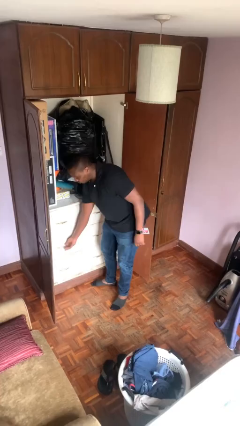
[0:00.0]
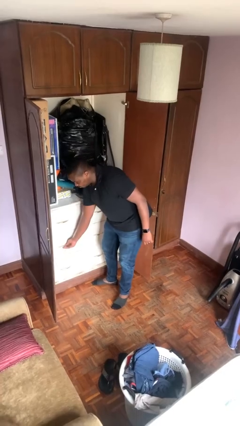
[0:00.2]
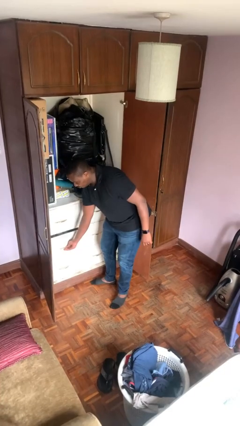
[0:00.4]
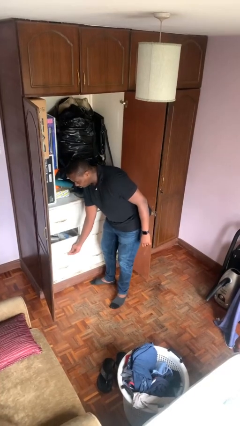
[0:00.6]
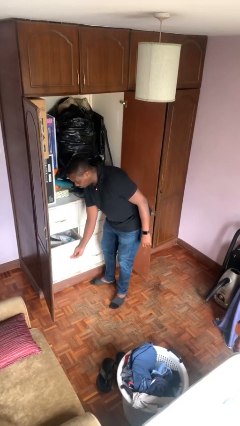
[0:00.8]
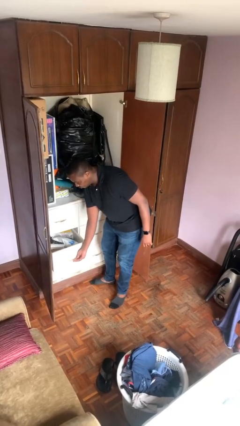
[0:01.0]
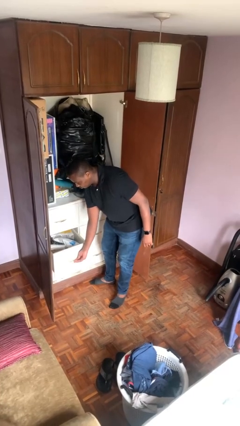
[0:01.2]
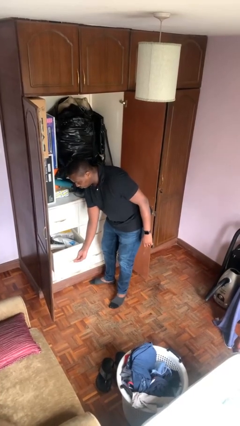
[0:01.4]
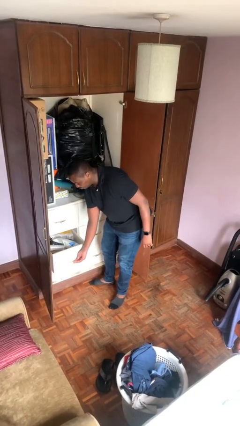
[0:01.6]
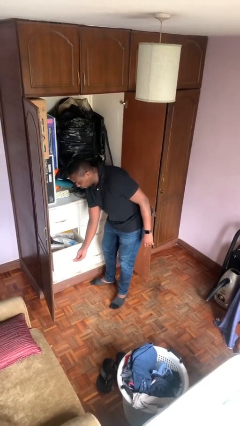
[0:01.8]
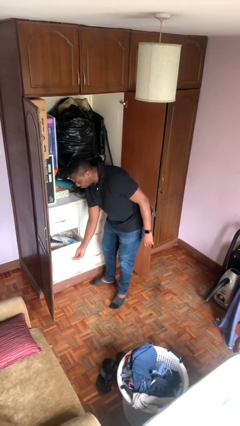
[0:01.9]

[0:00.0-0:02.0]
person opens dresser drawer

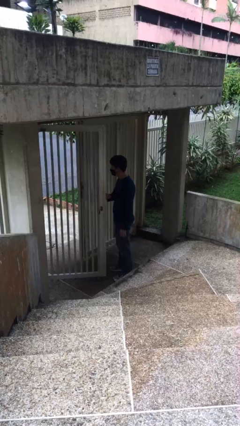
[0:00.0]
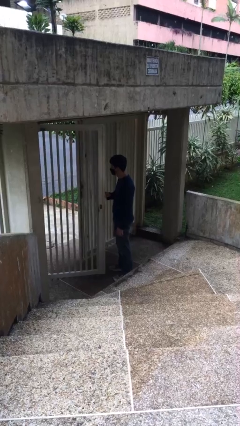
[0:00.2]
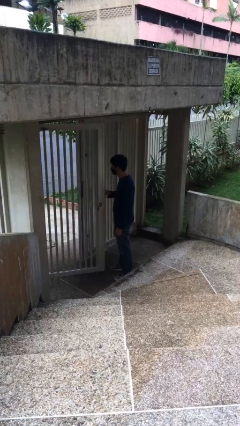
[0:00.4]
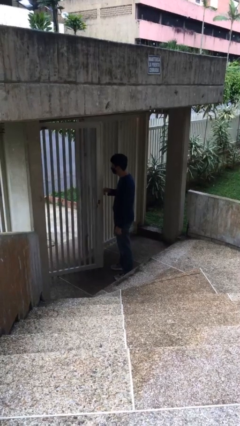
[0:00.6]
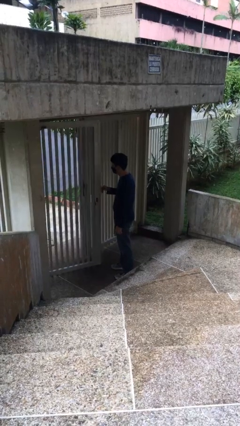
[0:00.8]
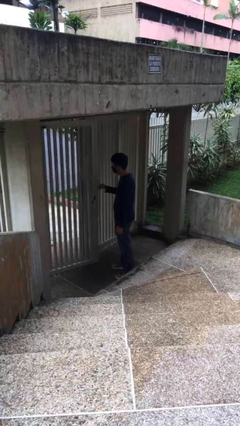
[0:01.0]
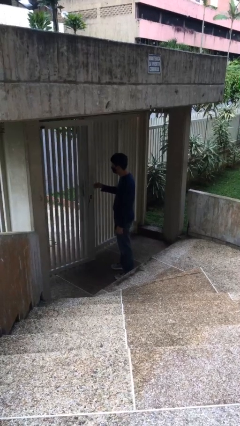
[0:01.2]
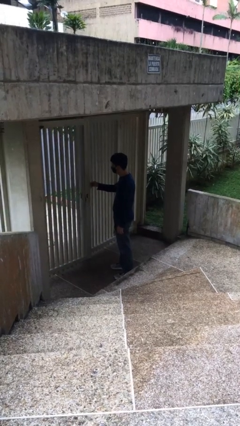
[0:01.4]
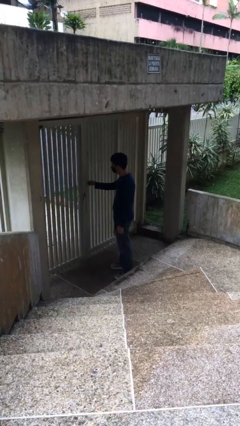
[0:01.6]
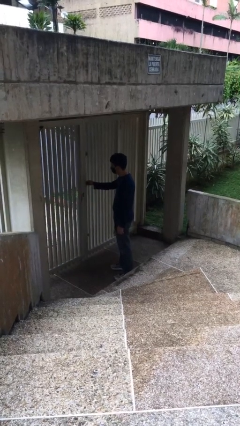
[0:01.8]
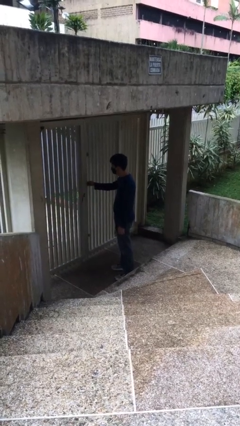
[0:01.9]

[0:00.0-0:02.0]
person closes facility door

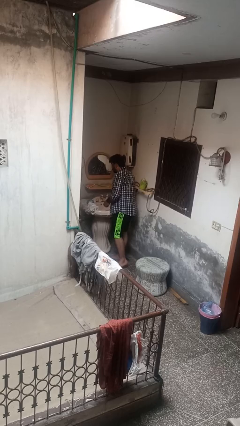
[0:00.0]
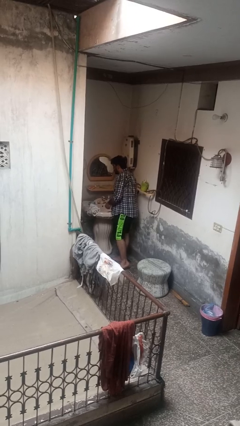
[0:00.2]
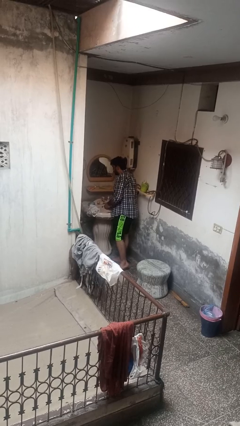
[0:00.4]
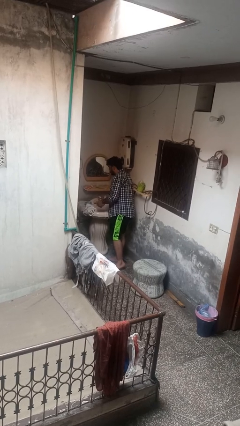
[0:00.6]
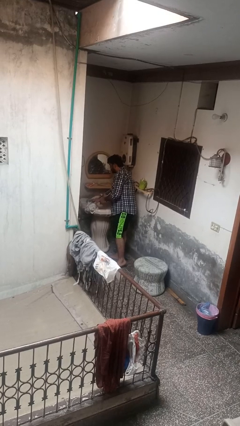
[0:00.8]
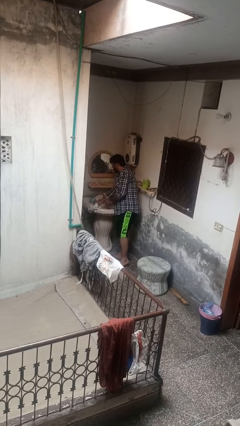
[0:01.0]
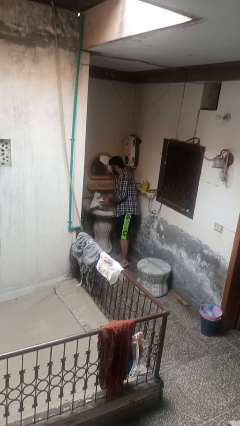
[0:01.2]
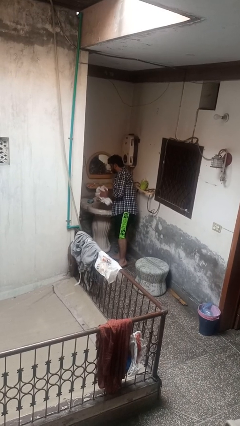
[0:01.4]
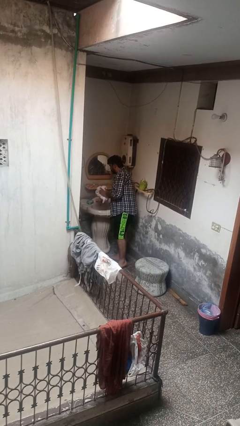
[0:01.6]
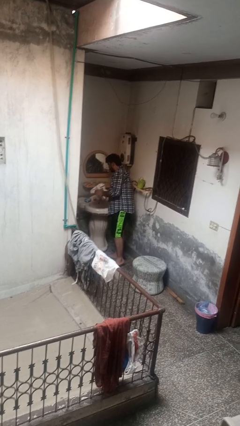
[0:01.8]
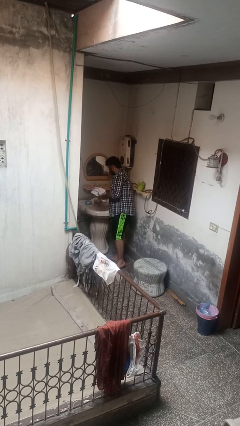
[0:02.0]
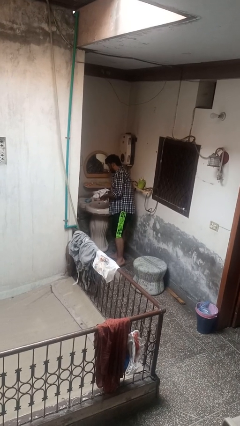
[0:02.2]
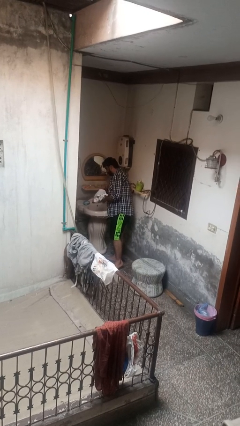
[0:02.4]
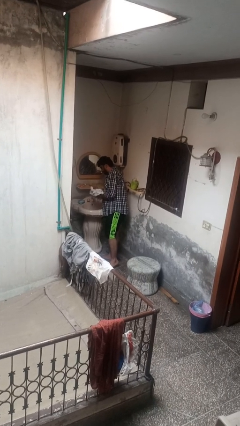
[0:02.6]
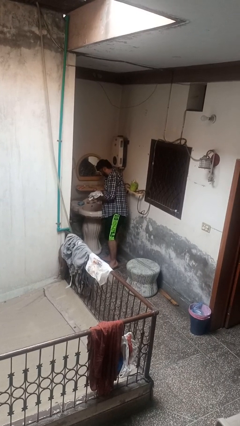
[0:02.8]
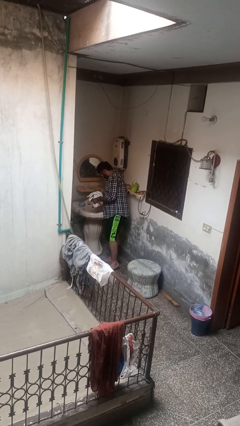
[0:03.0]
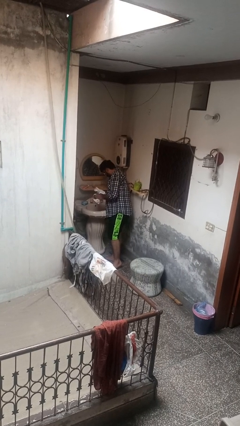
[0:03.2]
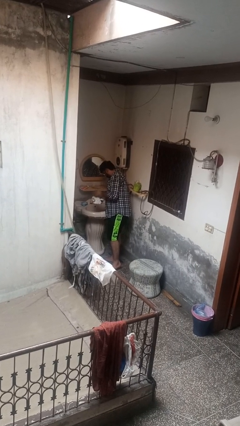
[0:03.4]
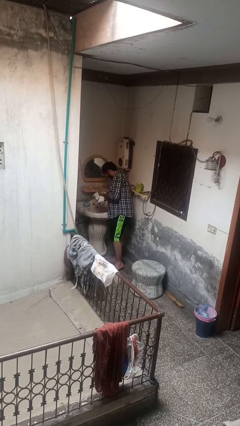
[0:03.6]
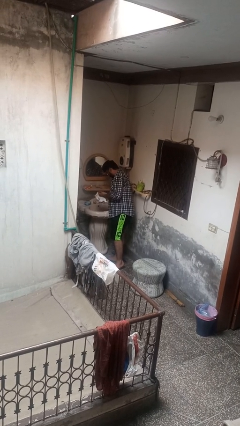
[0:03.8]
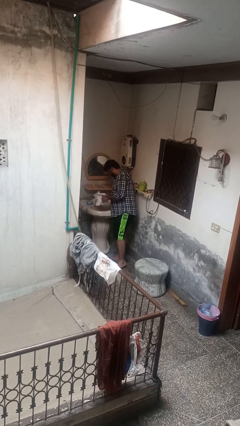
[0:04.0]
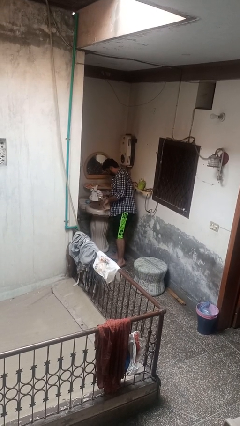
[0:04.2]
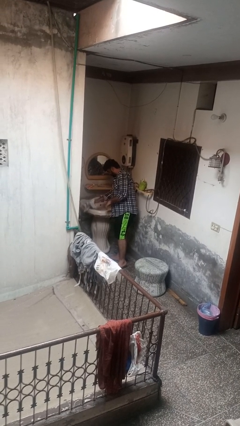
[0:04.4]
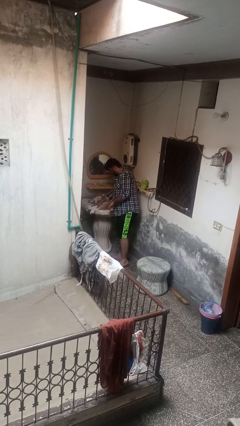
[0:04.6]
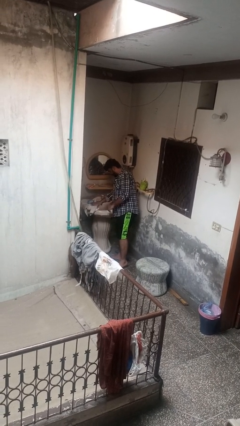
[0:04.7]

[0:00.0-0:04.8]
person dries hands with towel

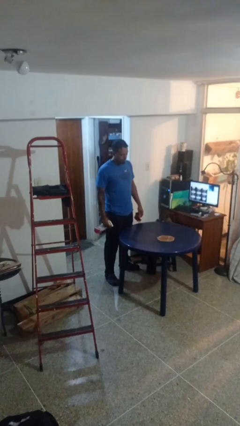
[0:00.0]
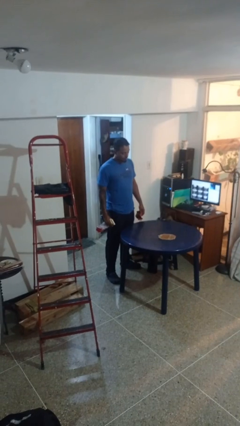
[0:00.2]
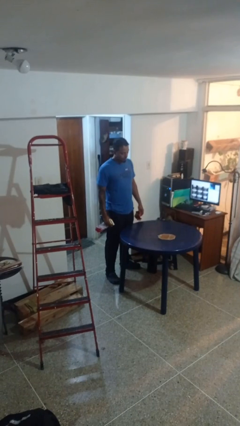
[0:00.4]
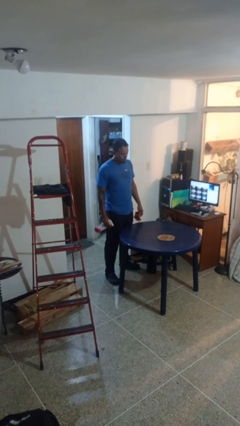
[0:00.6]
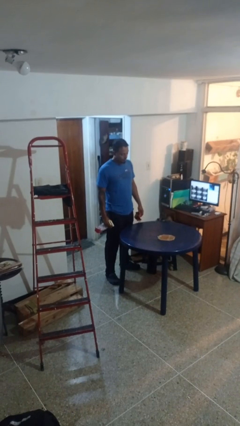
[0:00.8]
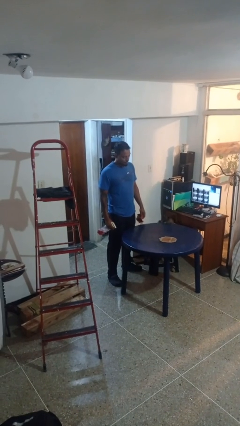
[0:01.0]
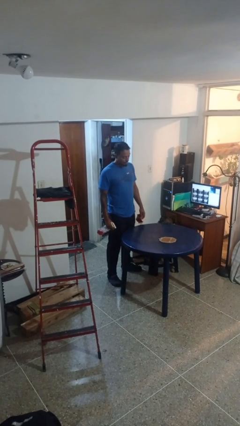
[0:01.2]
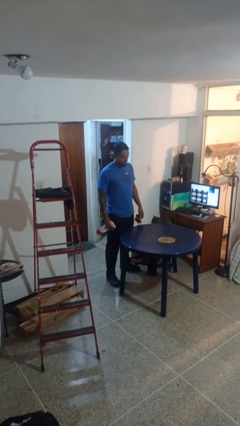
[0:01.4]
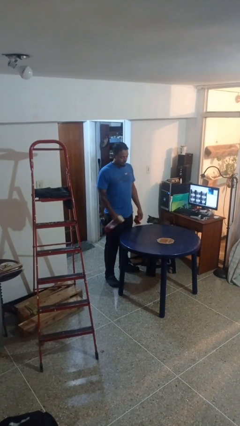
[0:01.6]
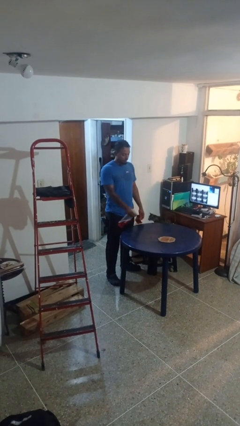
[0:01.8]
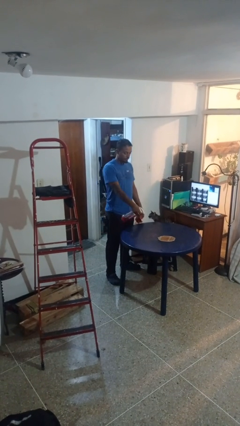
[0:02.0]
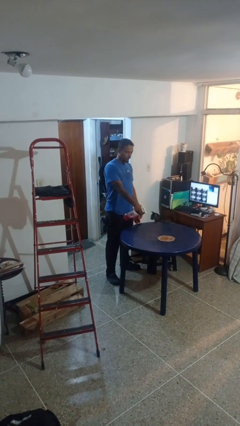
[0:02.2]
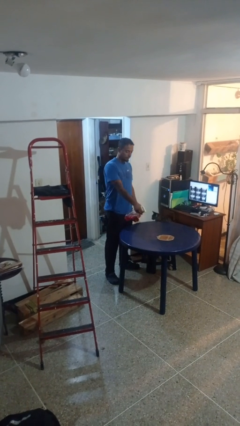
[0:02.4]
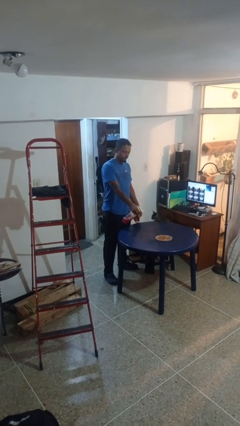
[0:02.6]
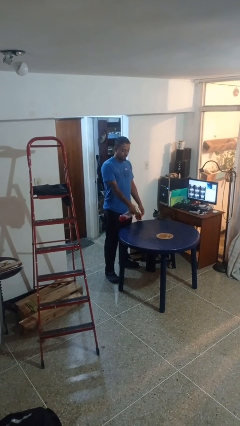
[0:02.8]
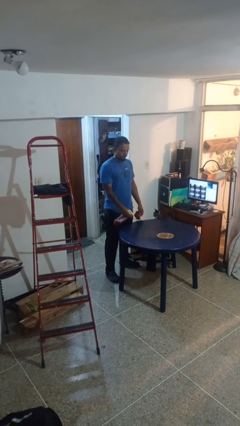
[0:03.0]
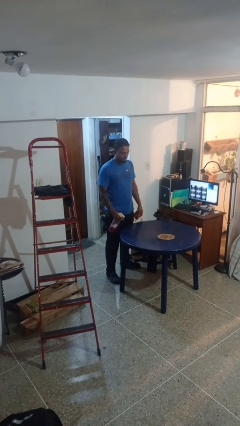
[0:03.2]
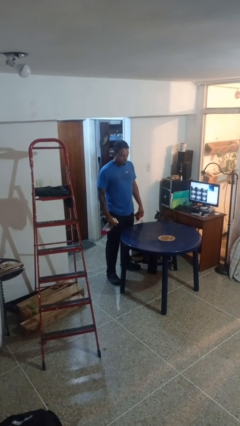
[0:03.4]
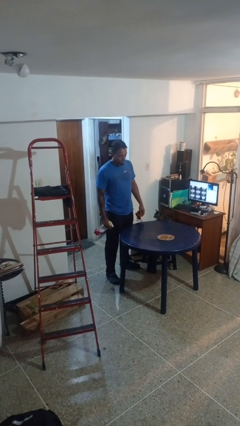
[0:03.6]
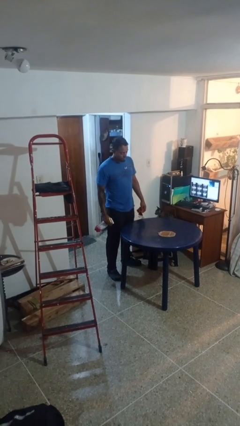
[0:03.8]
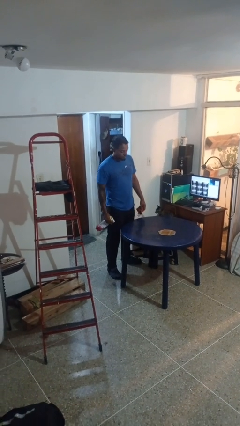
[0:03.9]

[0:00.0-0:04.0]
person sprays from bottle

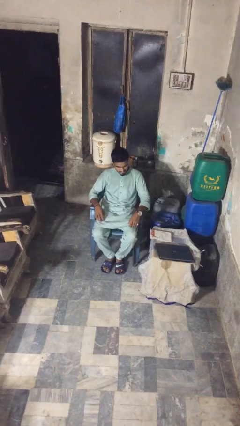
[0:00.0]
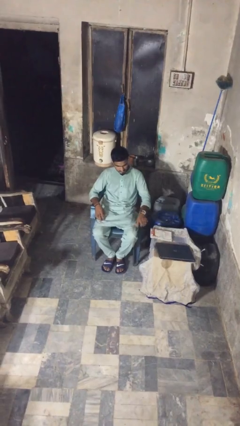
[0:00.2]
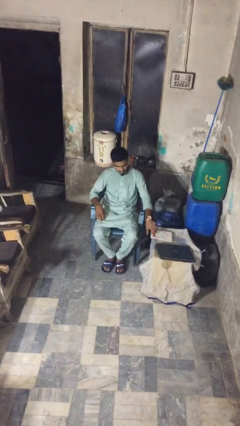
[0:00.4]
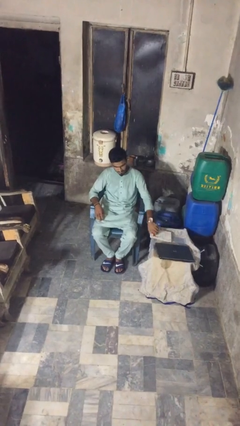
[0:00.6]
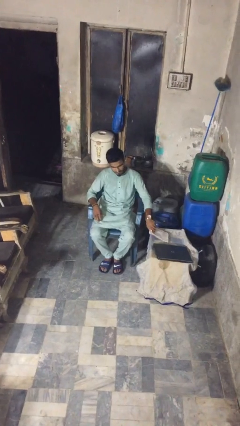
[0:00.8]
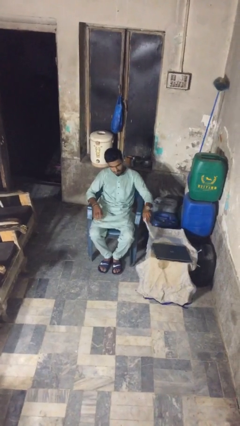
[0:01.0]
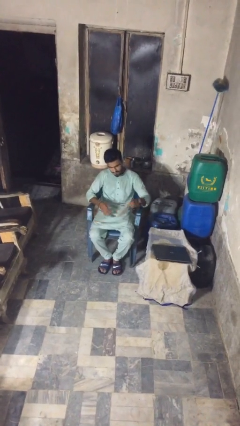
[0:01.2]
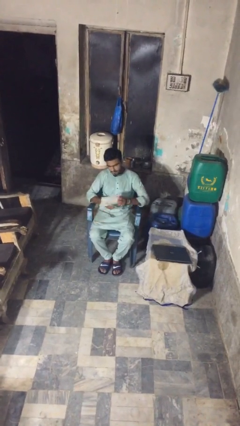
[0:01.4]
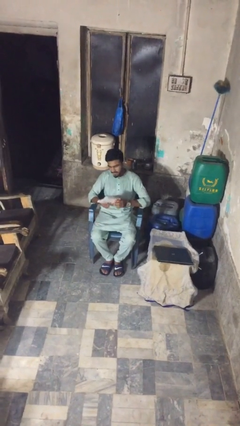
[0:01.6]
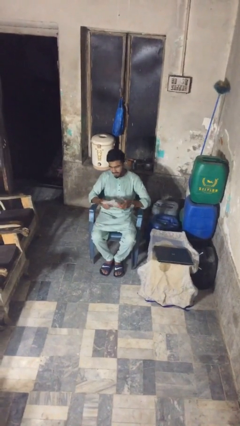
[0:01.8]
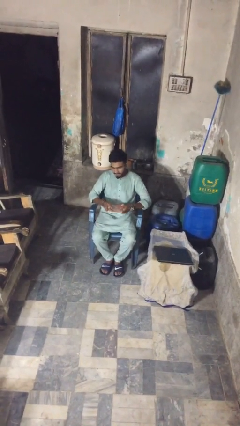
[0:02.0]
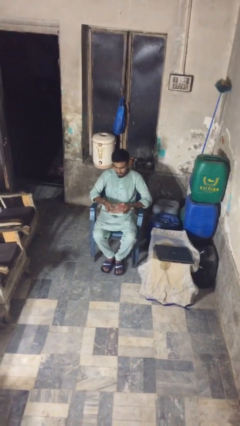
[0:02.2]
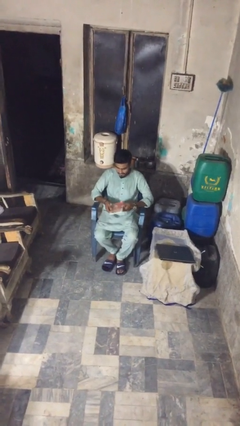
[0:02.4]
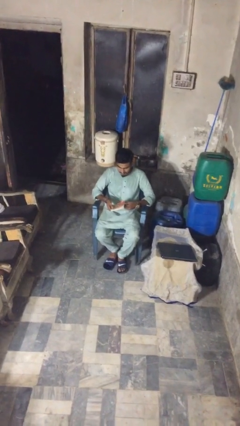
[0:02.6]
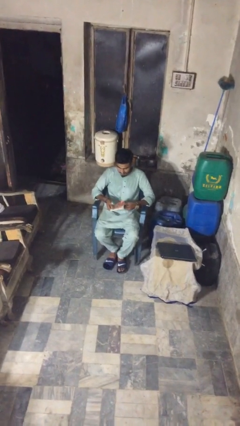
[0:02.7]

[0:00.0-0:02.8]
person picks up object from table

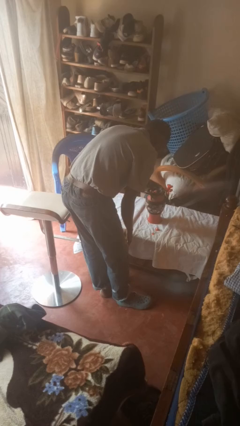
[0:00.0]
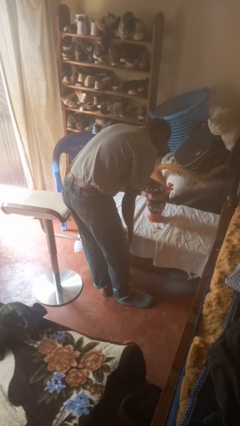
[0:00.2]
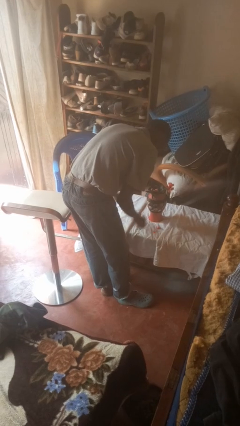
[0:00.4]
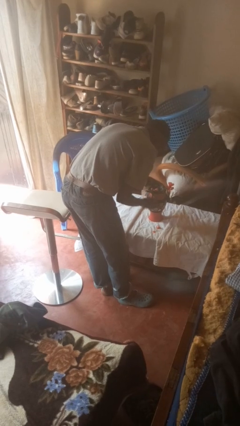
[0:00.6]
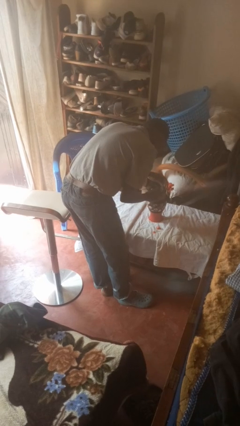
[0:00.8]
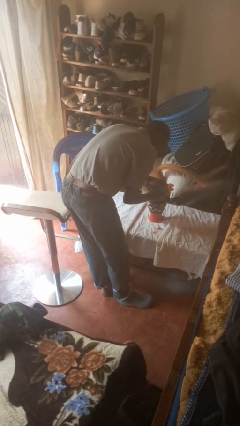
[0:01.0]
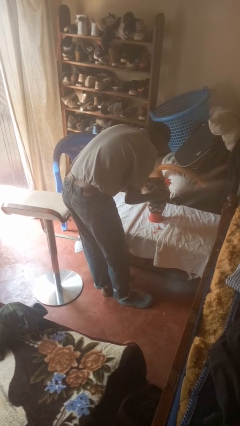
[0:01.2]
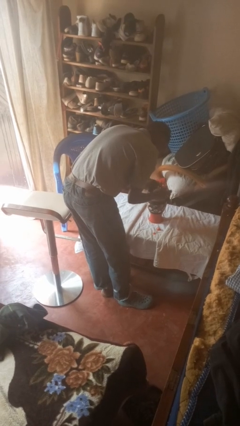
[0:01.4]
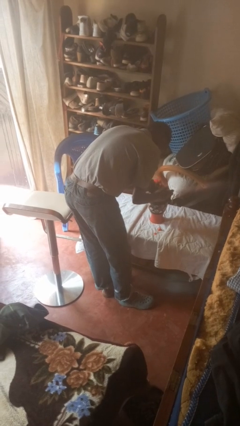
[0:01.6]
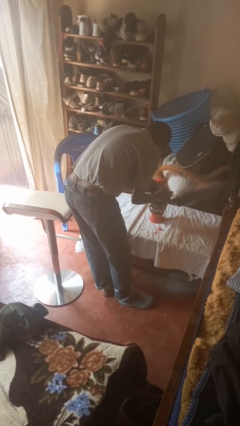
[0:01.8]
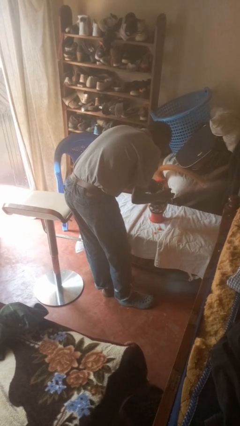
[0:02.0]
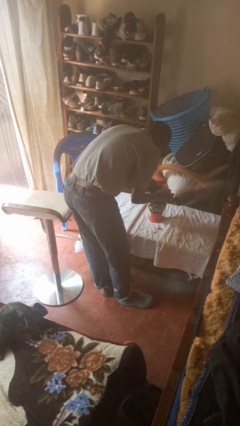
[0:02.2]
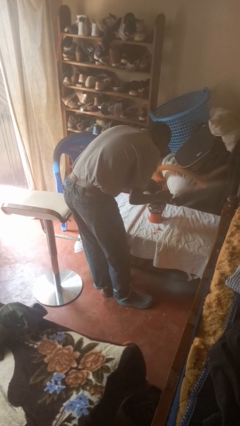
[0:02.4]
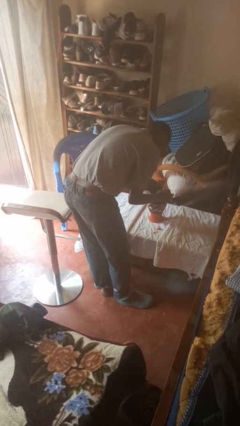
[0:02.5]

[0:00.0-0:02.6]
person arranges flowers in vase
